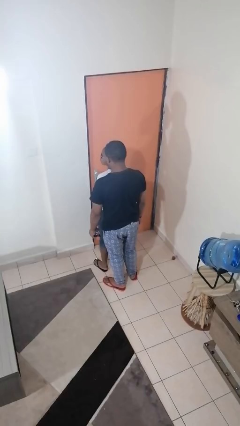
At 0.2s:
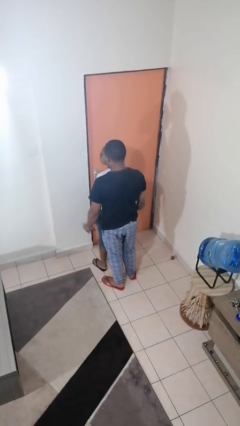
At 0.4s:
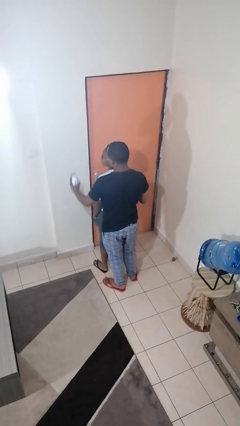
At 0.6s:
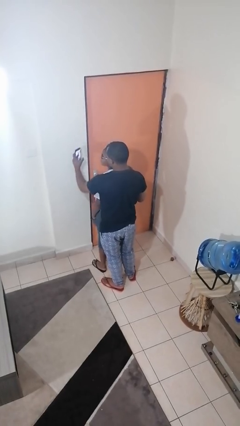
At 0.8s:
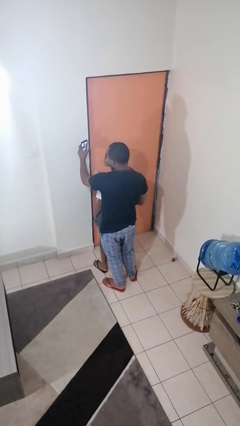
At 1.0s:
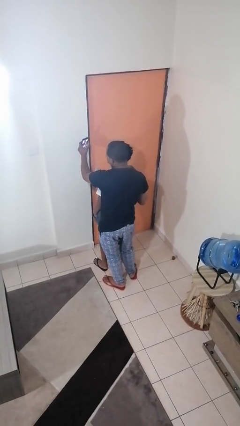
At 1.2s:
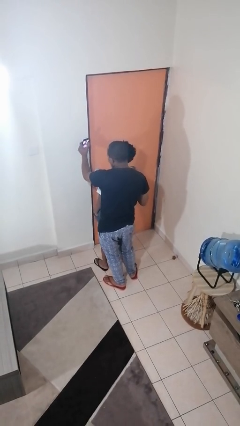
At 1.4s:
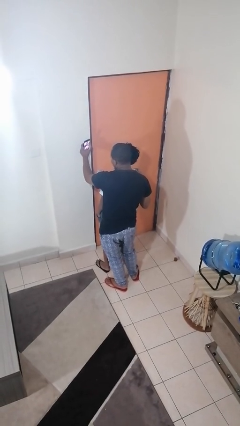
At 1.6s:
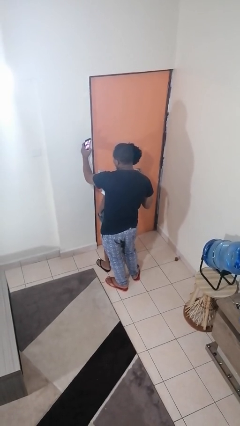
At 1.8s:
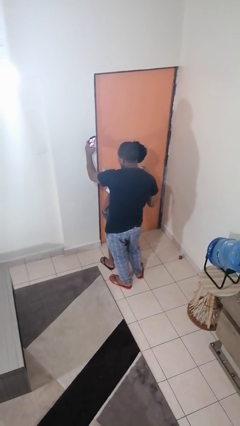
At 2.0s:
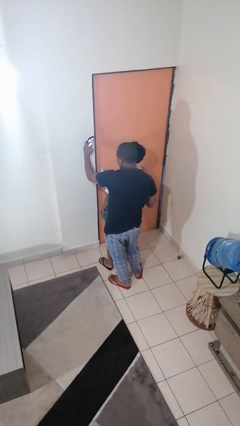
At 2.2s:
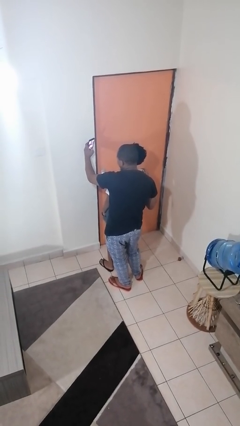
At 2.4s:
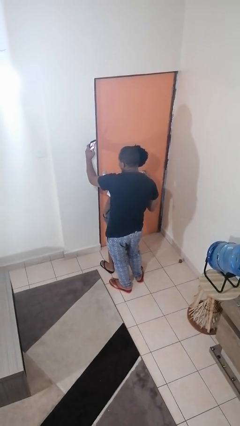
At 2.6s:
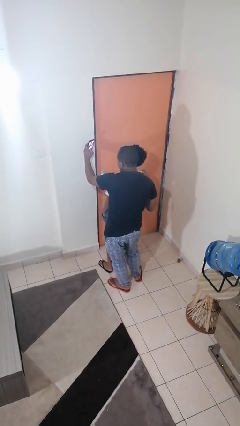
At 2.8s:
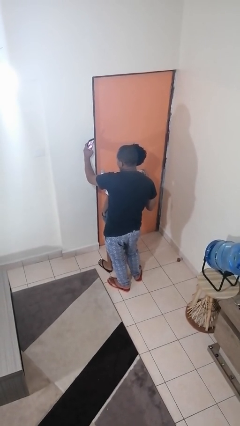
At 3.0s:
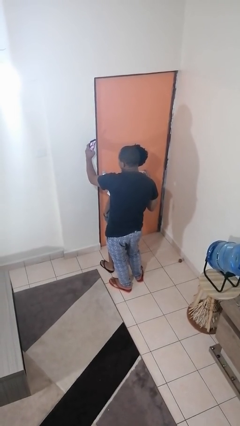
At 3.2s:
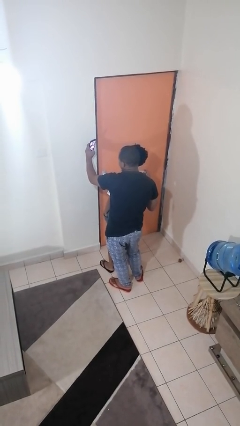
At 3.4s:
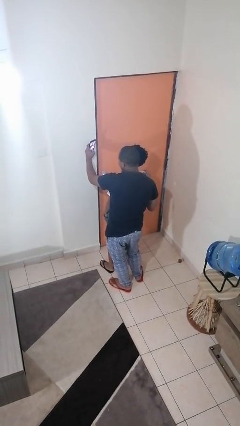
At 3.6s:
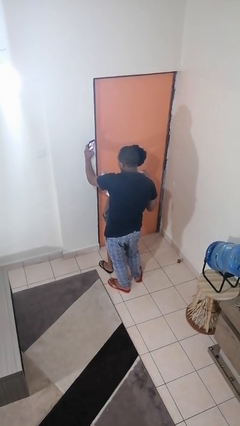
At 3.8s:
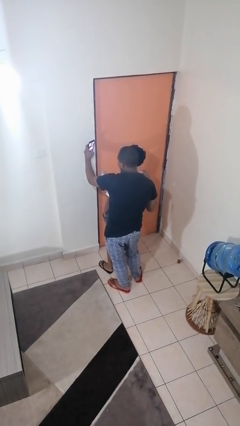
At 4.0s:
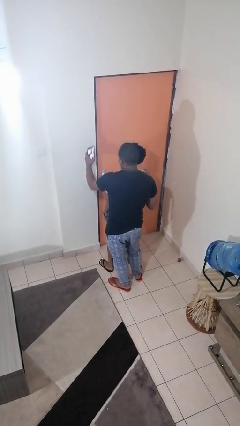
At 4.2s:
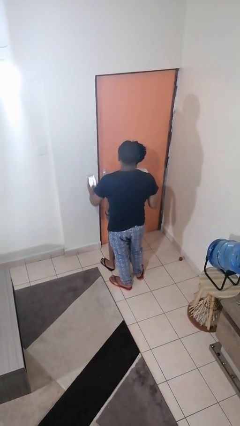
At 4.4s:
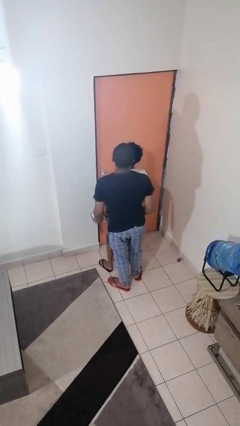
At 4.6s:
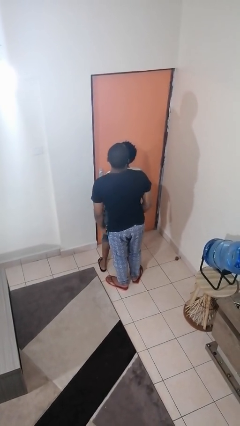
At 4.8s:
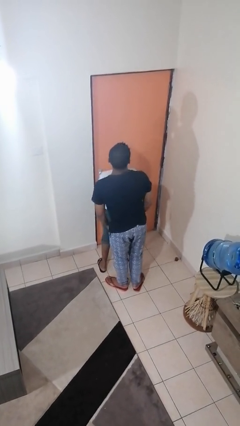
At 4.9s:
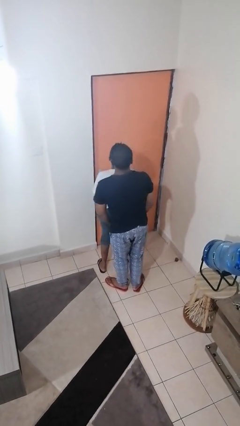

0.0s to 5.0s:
person takes selfie with person

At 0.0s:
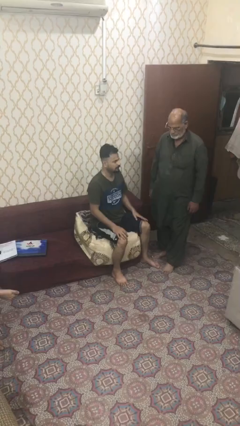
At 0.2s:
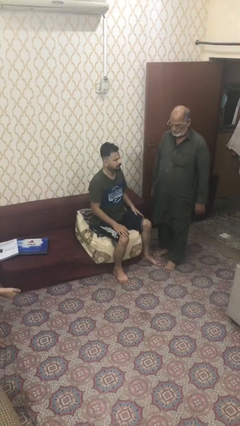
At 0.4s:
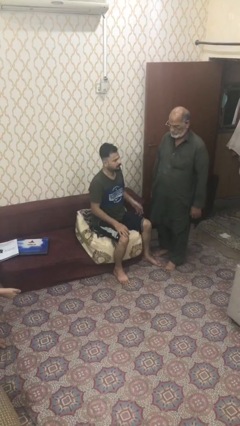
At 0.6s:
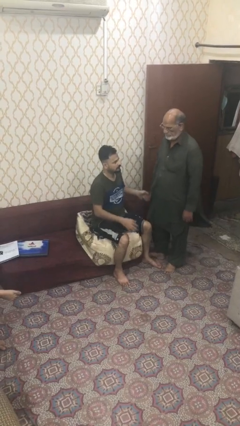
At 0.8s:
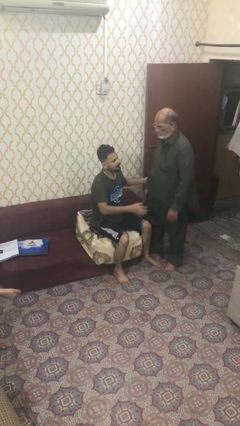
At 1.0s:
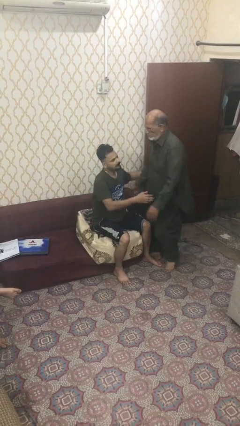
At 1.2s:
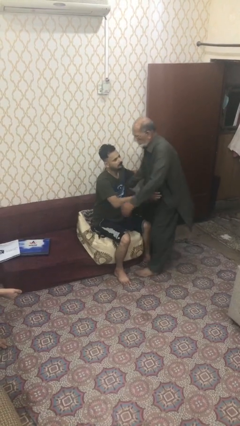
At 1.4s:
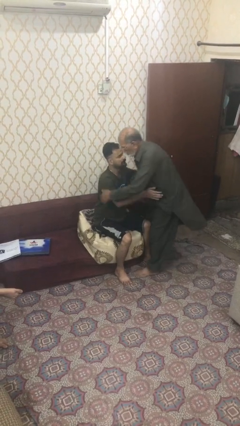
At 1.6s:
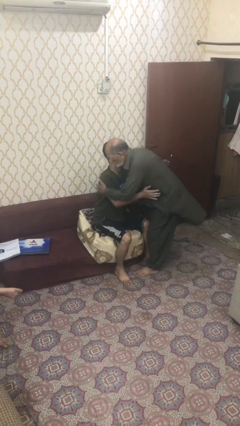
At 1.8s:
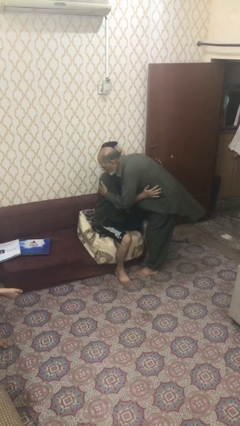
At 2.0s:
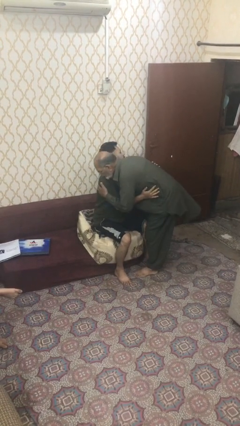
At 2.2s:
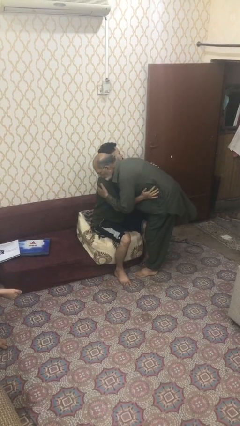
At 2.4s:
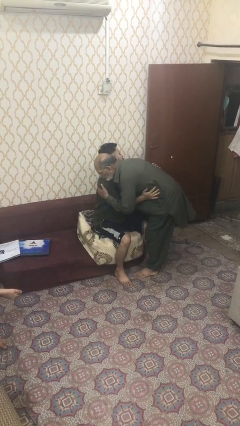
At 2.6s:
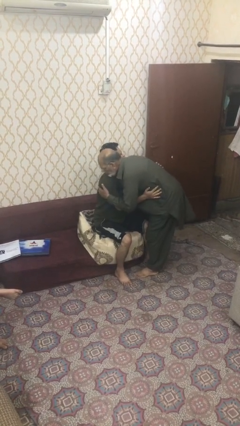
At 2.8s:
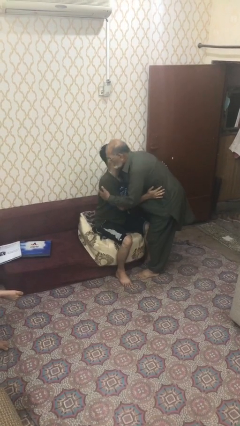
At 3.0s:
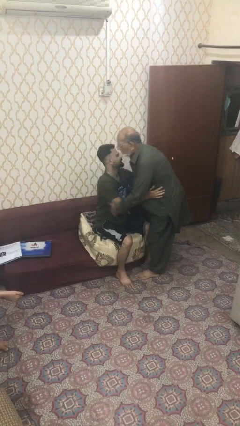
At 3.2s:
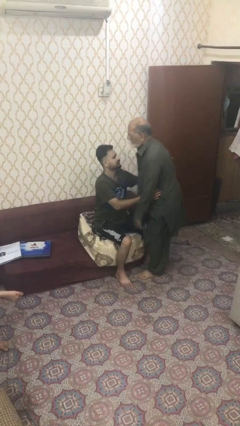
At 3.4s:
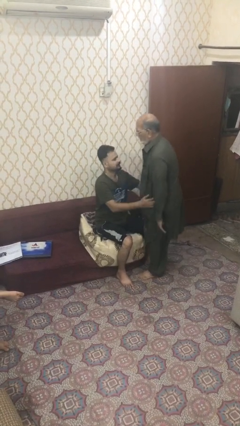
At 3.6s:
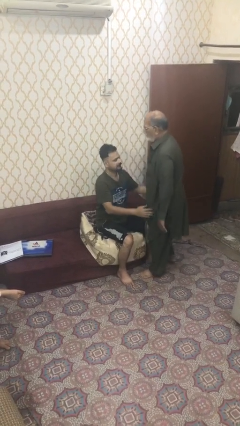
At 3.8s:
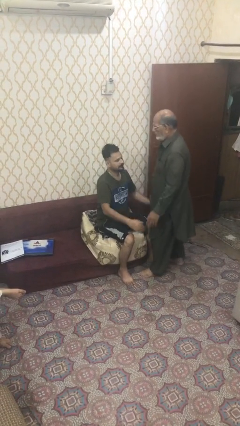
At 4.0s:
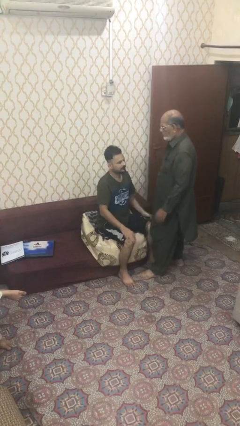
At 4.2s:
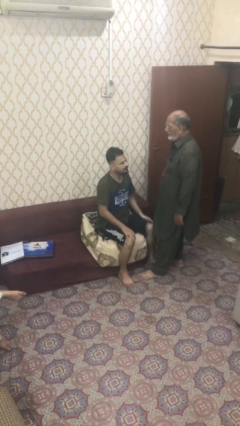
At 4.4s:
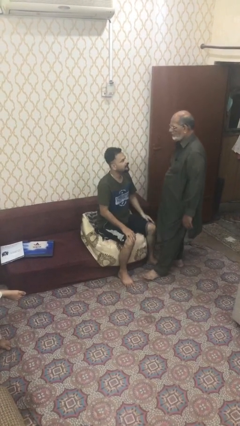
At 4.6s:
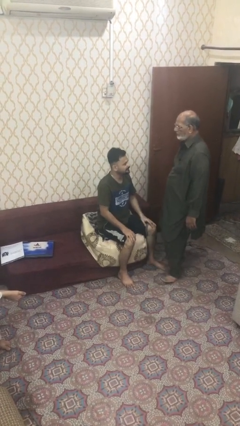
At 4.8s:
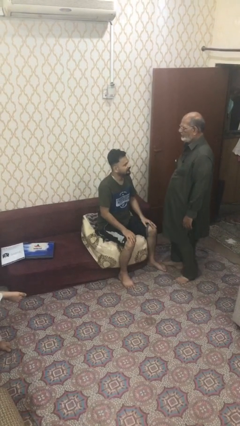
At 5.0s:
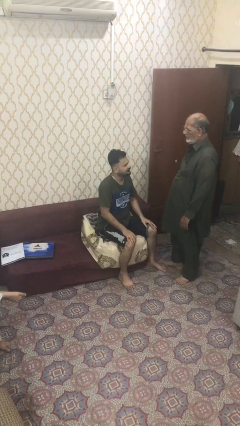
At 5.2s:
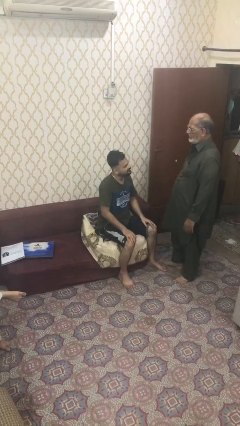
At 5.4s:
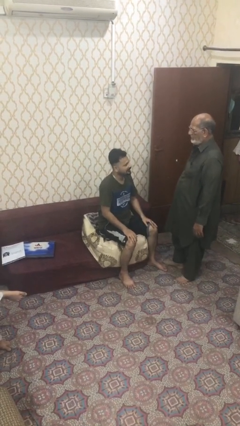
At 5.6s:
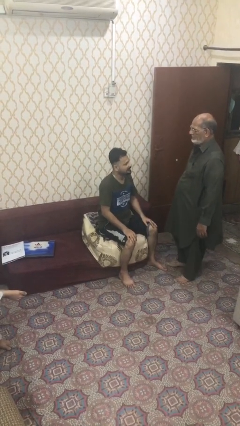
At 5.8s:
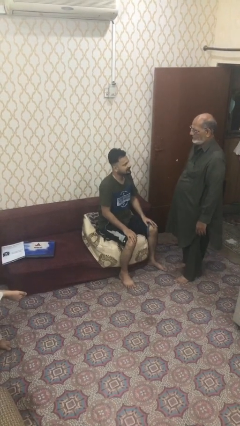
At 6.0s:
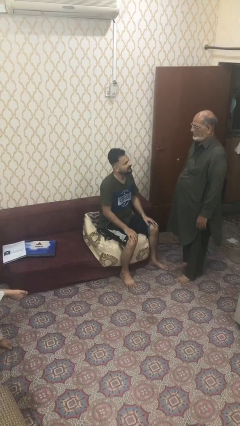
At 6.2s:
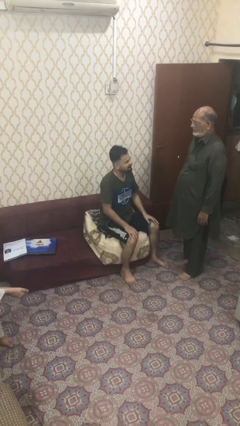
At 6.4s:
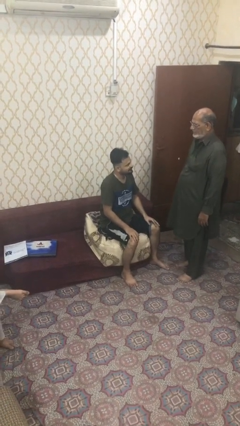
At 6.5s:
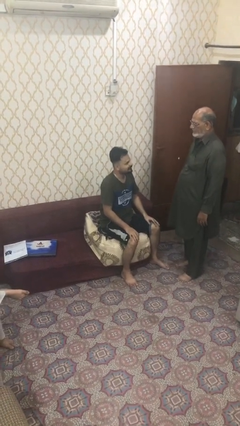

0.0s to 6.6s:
person embraces person

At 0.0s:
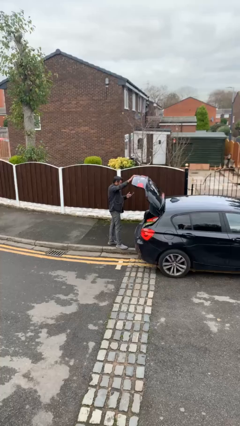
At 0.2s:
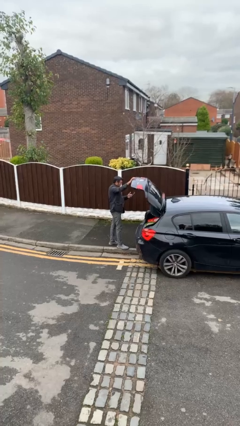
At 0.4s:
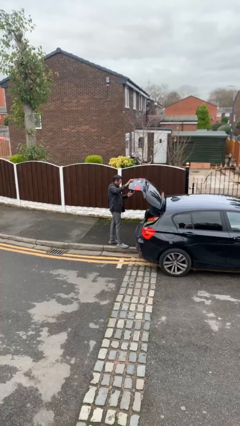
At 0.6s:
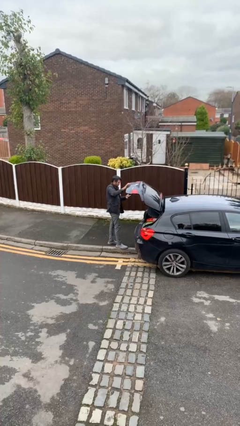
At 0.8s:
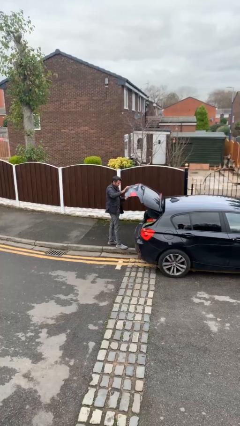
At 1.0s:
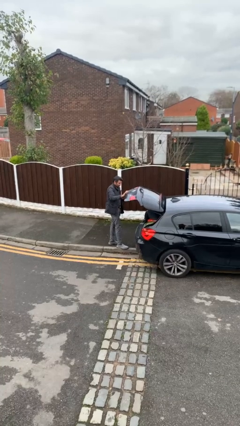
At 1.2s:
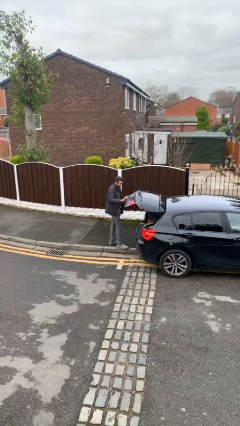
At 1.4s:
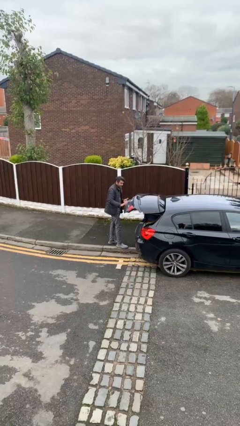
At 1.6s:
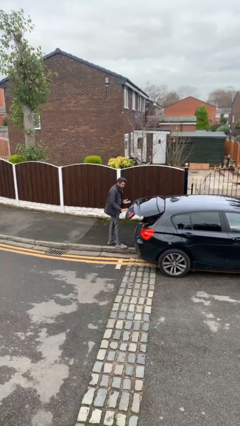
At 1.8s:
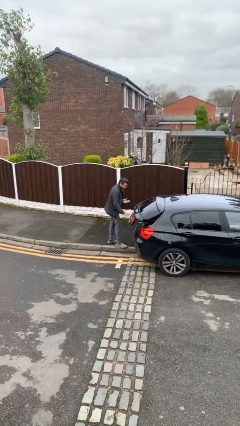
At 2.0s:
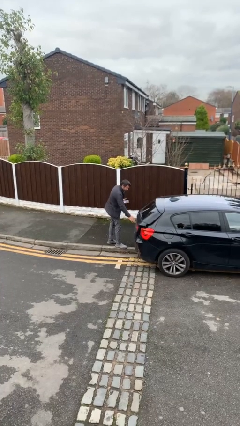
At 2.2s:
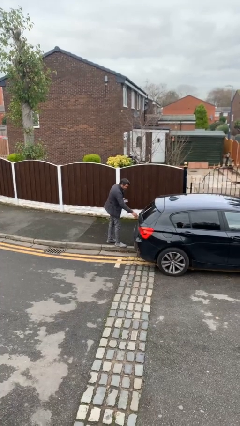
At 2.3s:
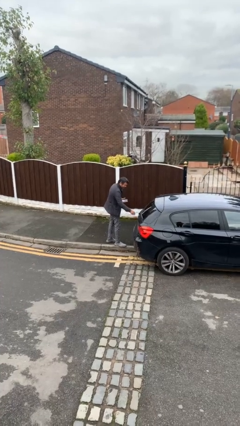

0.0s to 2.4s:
person closes car trunk

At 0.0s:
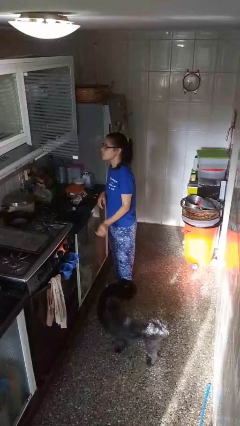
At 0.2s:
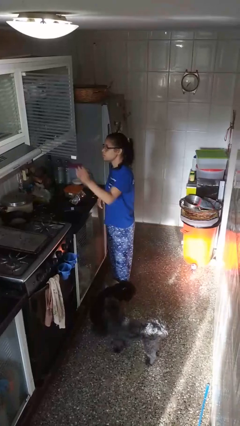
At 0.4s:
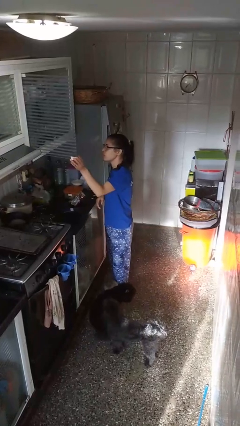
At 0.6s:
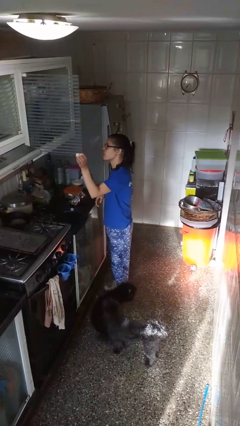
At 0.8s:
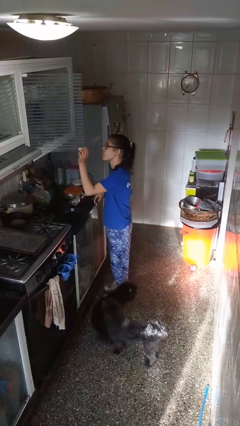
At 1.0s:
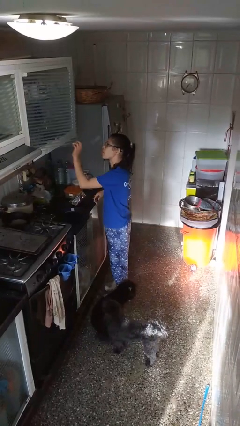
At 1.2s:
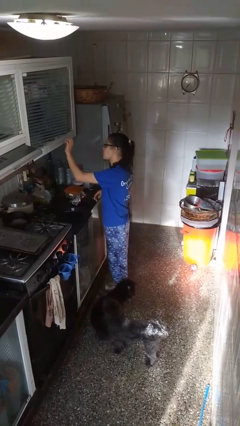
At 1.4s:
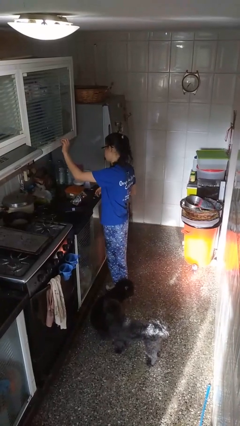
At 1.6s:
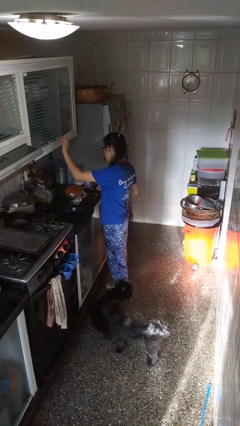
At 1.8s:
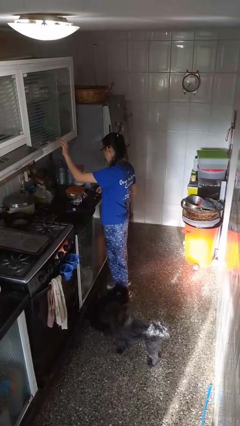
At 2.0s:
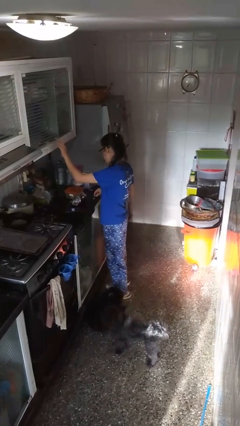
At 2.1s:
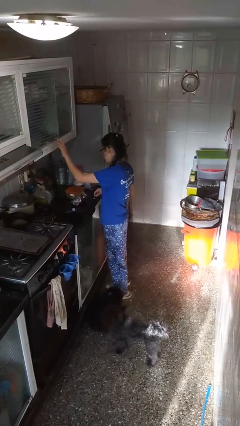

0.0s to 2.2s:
person closes cabinet

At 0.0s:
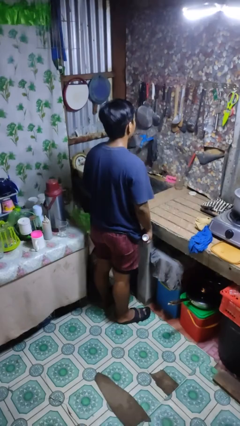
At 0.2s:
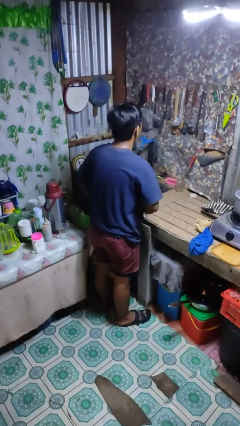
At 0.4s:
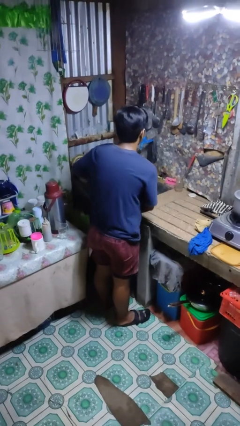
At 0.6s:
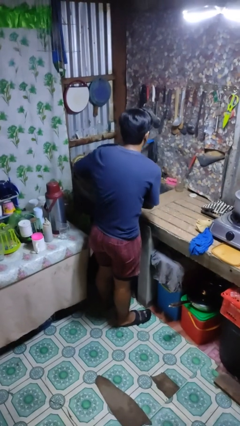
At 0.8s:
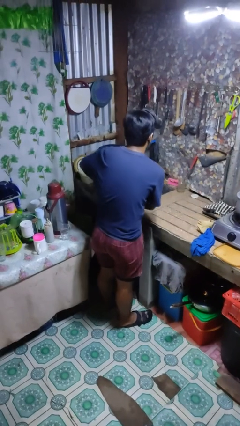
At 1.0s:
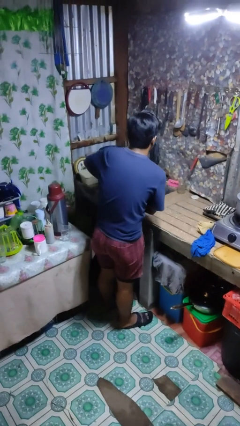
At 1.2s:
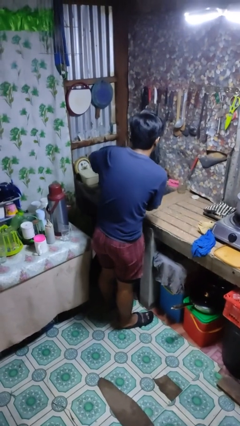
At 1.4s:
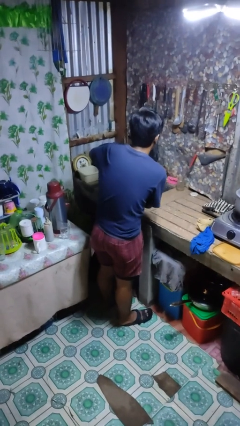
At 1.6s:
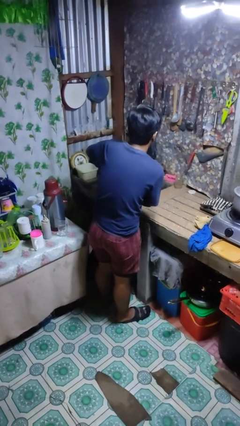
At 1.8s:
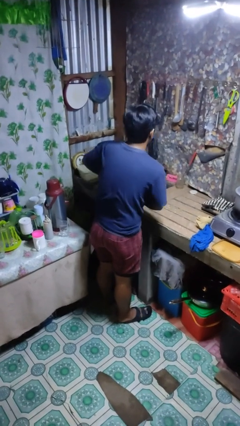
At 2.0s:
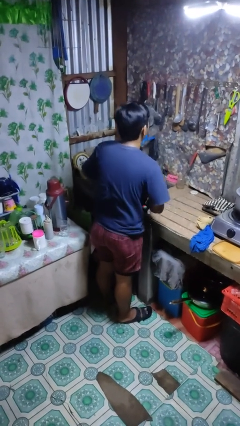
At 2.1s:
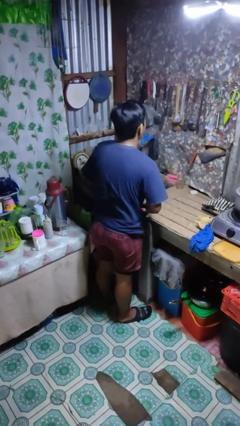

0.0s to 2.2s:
person applies deodorant
